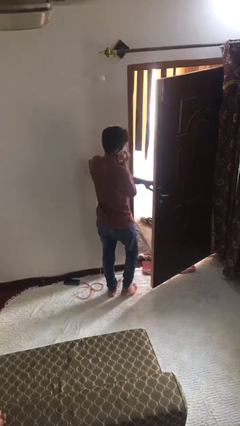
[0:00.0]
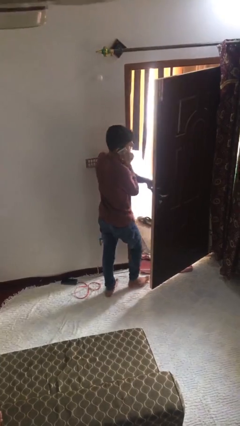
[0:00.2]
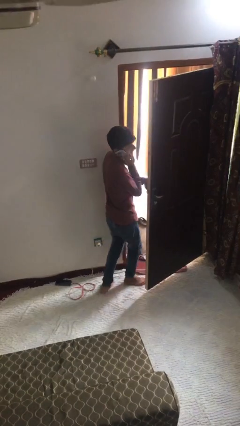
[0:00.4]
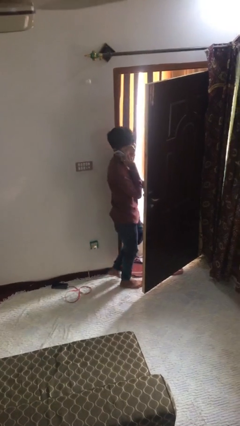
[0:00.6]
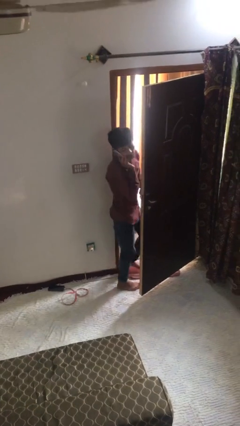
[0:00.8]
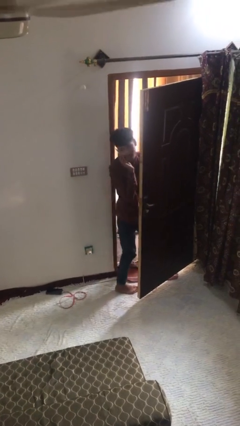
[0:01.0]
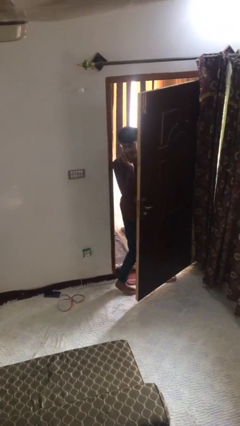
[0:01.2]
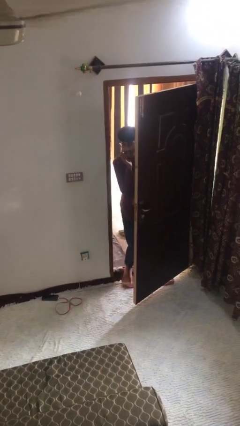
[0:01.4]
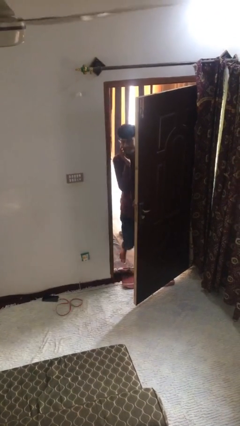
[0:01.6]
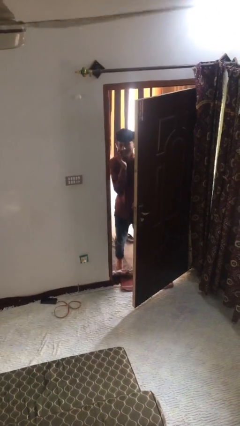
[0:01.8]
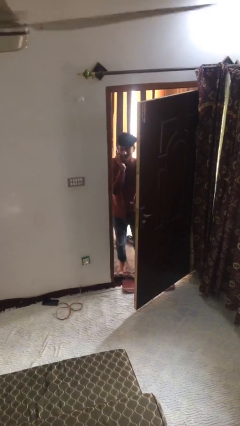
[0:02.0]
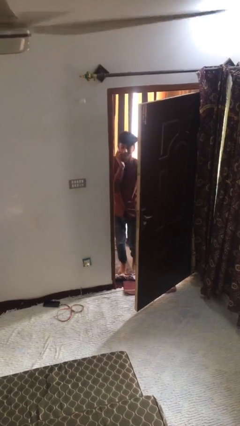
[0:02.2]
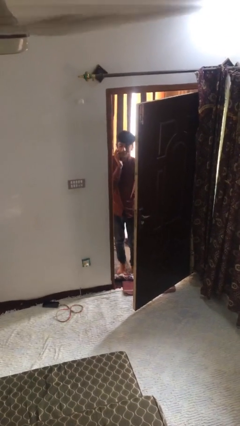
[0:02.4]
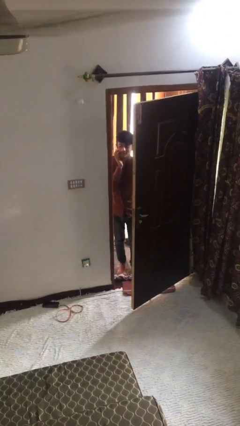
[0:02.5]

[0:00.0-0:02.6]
person exits scene through structure

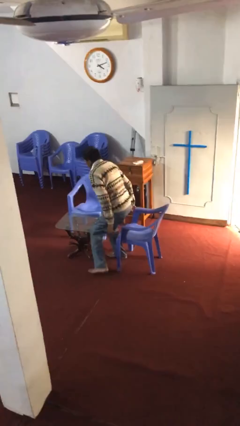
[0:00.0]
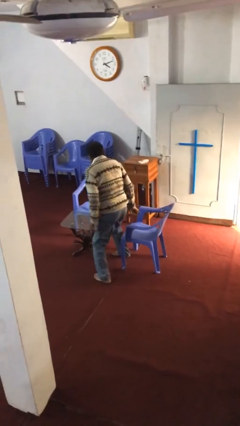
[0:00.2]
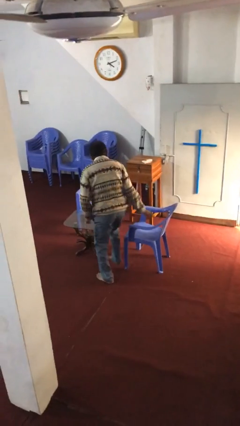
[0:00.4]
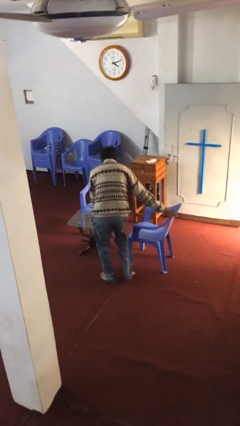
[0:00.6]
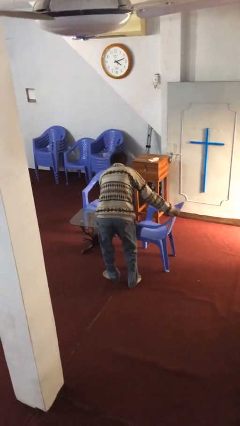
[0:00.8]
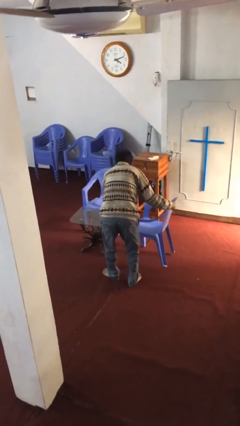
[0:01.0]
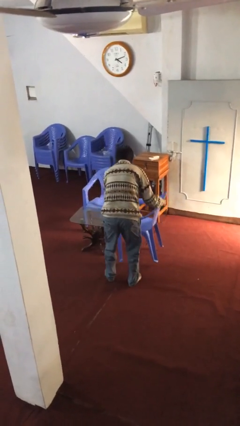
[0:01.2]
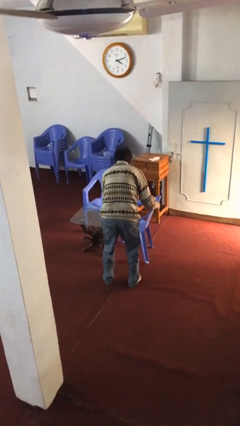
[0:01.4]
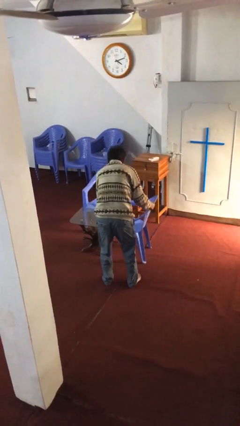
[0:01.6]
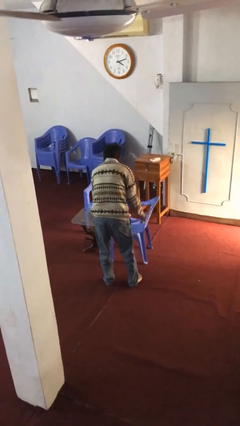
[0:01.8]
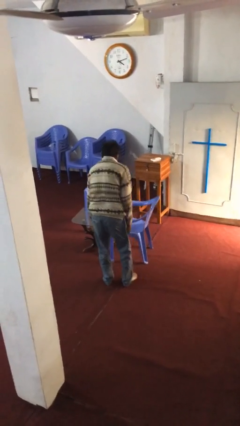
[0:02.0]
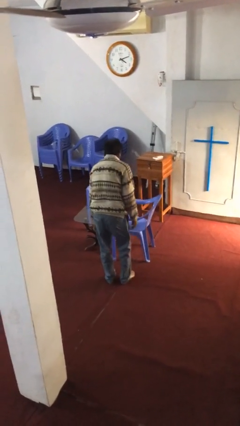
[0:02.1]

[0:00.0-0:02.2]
person stands up

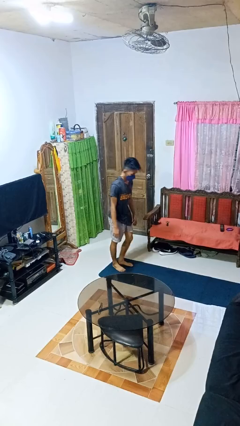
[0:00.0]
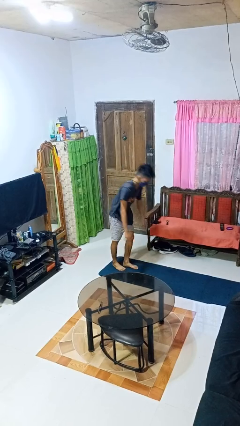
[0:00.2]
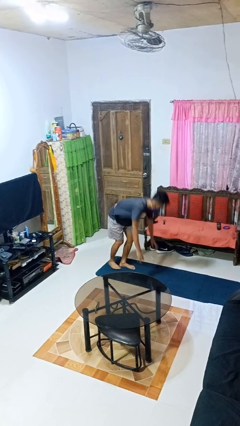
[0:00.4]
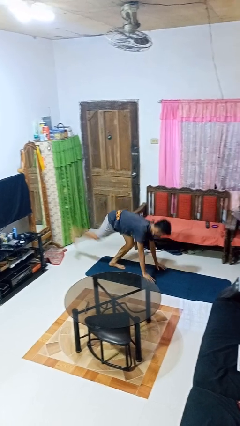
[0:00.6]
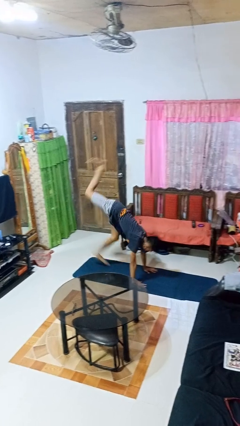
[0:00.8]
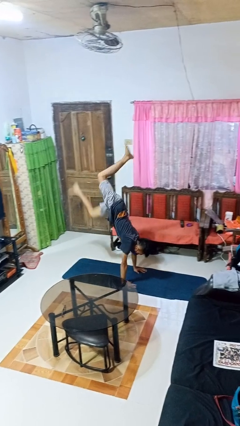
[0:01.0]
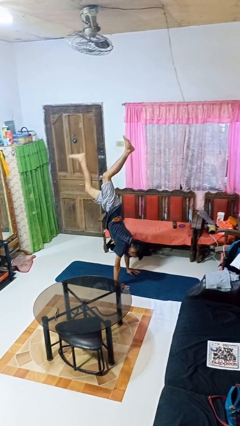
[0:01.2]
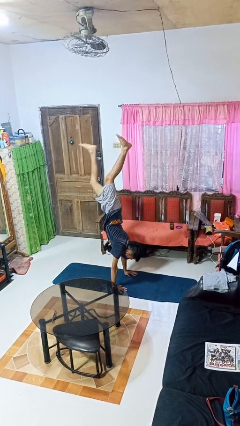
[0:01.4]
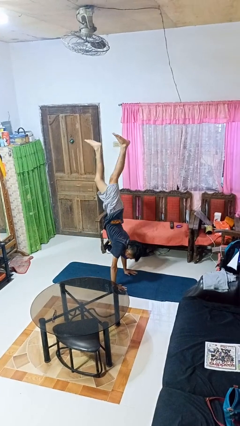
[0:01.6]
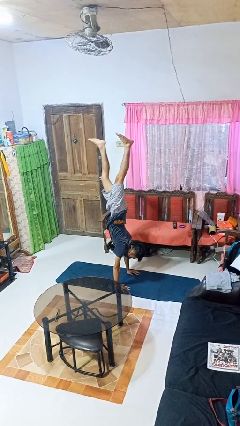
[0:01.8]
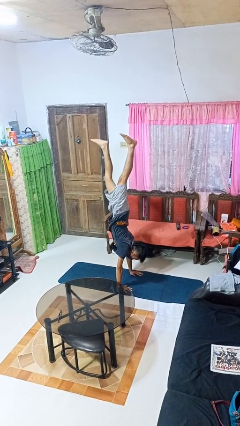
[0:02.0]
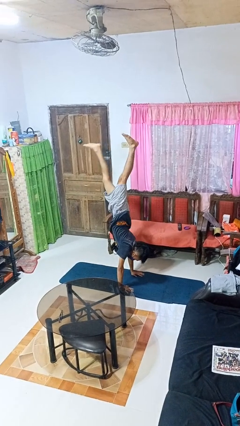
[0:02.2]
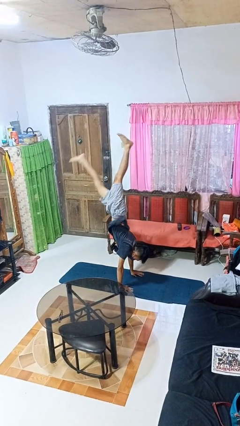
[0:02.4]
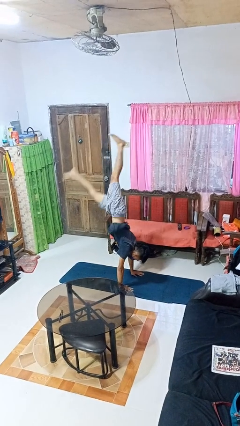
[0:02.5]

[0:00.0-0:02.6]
person handstand

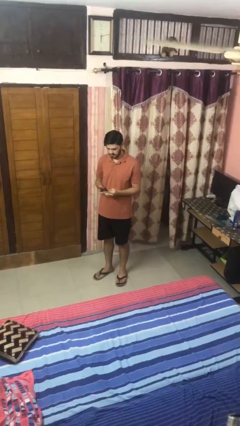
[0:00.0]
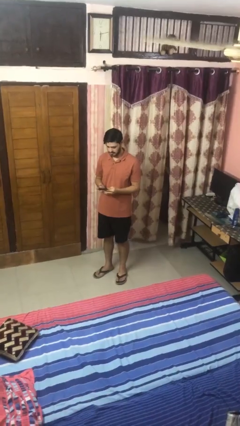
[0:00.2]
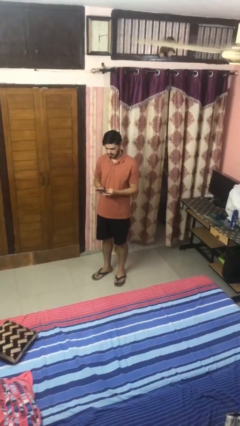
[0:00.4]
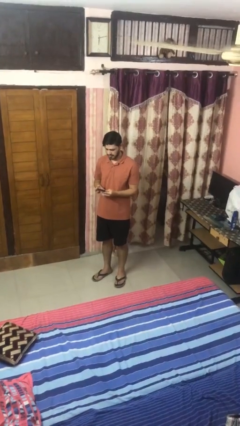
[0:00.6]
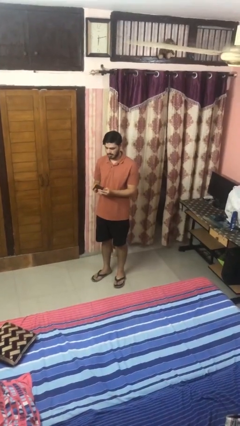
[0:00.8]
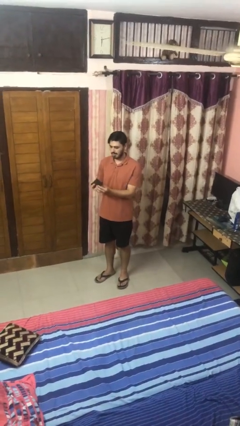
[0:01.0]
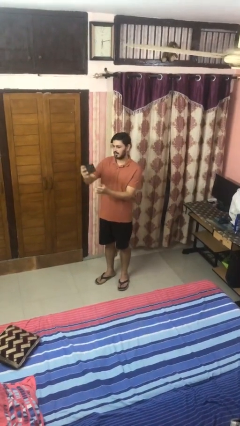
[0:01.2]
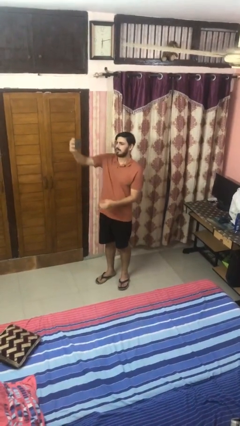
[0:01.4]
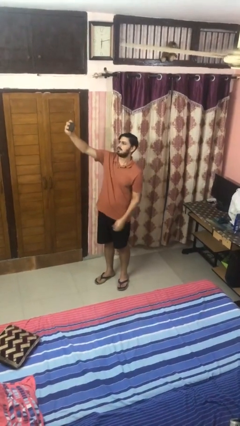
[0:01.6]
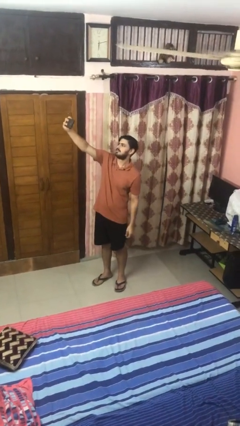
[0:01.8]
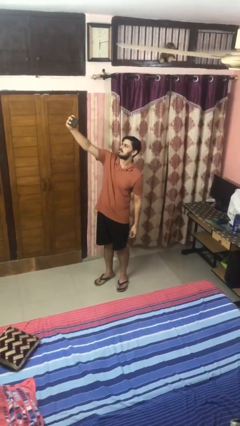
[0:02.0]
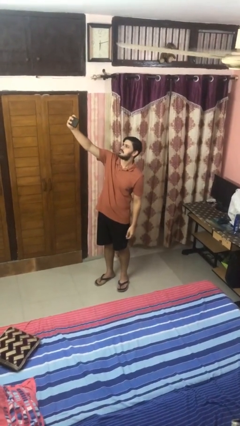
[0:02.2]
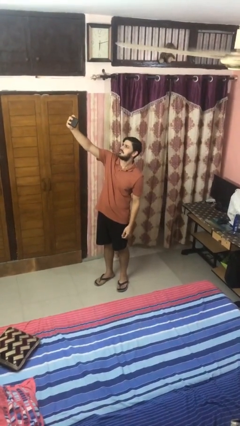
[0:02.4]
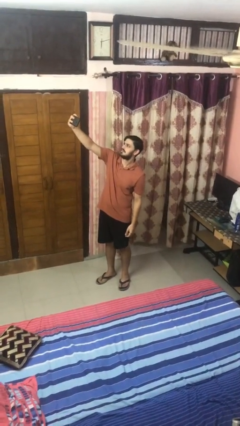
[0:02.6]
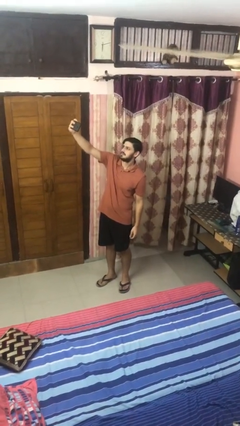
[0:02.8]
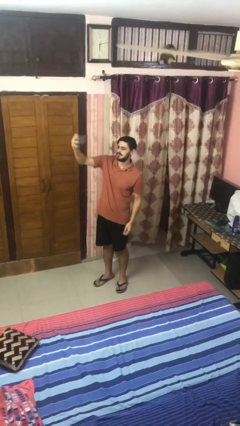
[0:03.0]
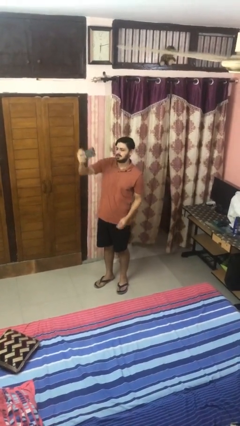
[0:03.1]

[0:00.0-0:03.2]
person takes selfie

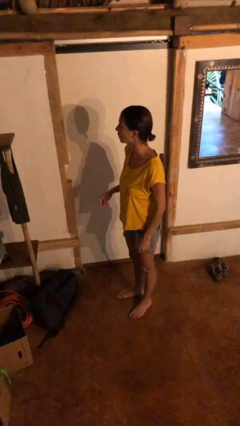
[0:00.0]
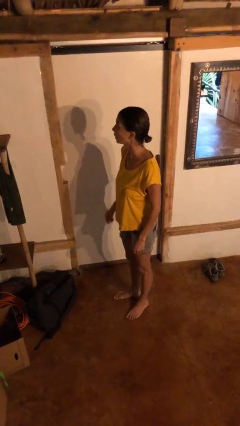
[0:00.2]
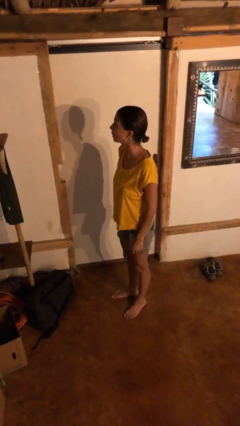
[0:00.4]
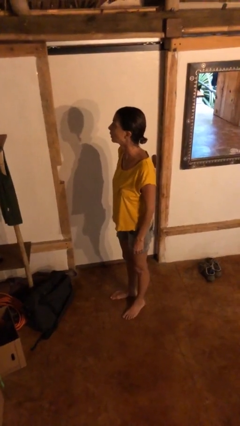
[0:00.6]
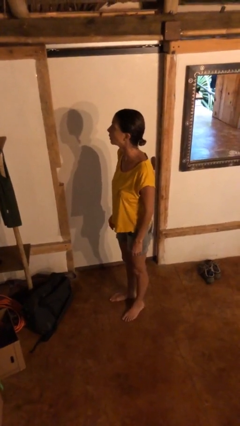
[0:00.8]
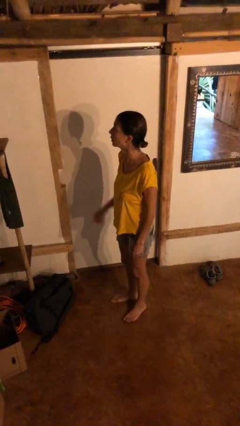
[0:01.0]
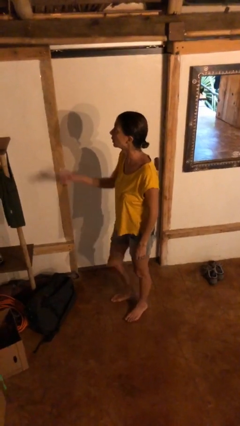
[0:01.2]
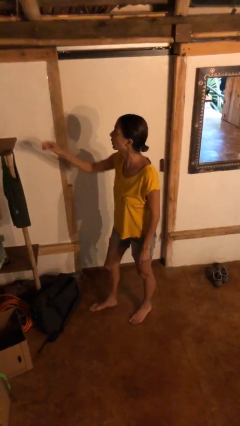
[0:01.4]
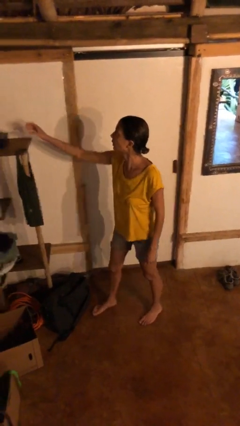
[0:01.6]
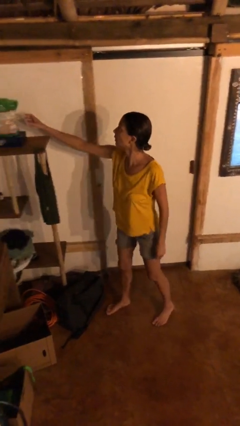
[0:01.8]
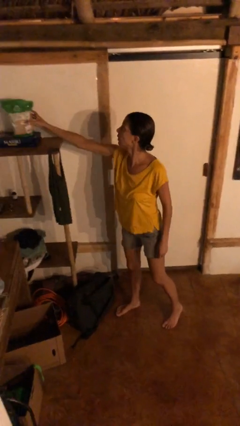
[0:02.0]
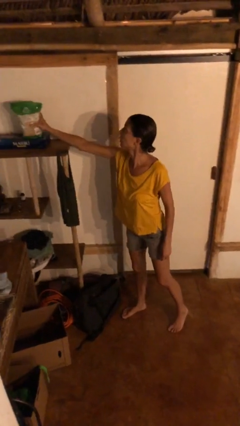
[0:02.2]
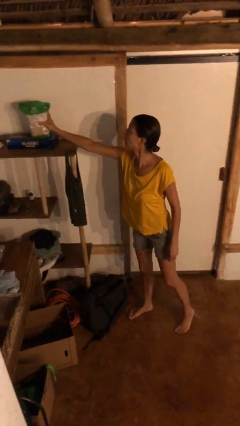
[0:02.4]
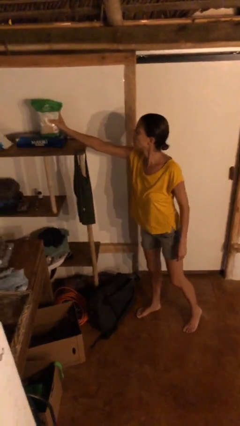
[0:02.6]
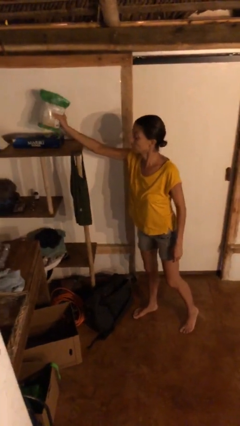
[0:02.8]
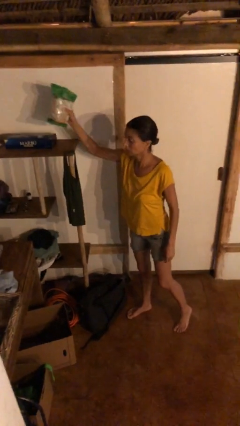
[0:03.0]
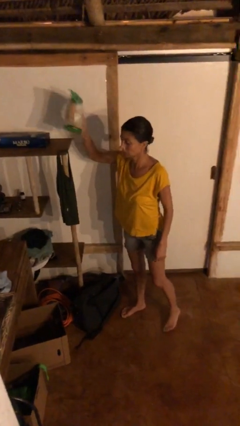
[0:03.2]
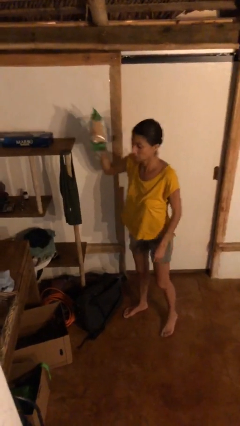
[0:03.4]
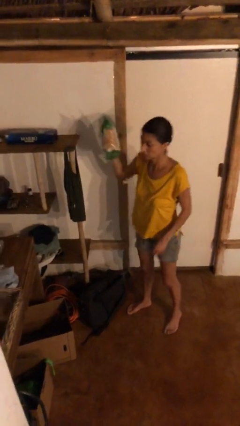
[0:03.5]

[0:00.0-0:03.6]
person picks up object from shelf

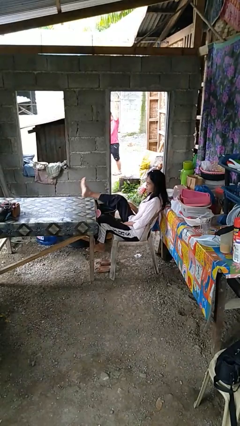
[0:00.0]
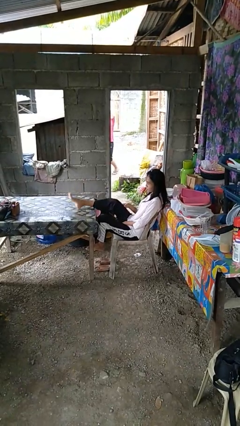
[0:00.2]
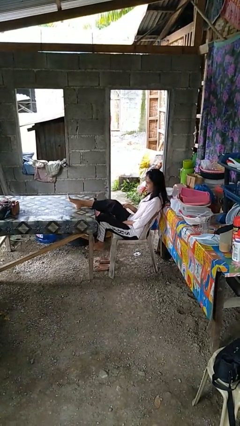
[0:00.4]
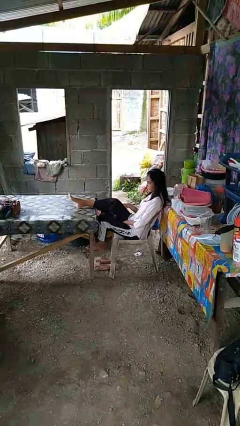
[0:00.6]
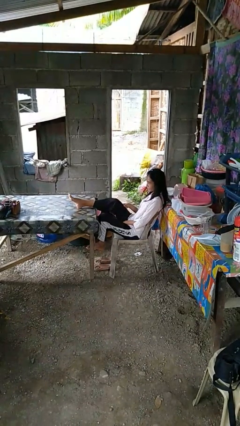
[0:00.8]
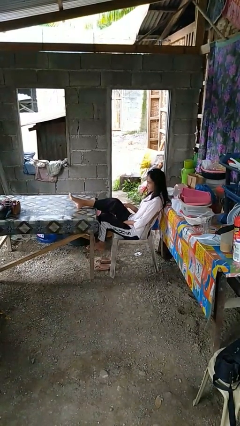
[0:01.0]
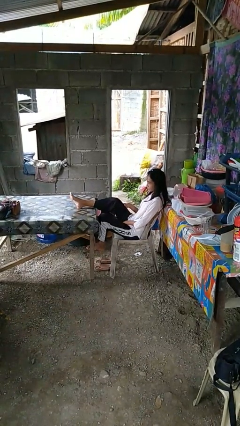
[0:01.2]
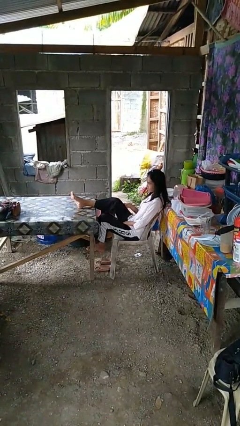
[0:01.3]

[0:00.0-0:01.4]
person puts feet up

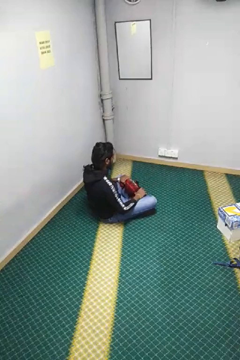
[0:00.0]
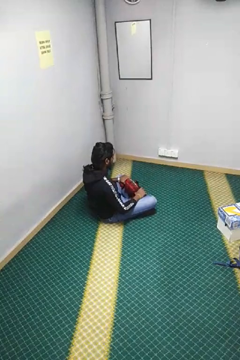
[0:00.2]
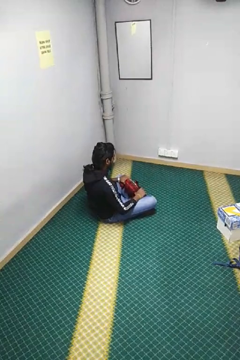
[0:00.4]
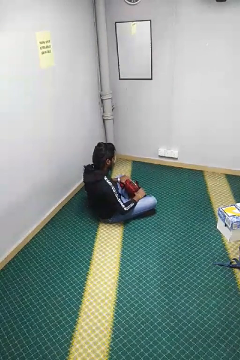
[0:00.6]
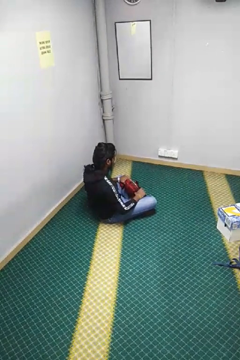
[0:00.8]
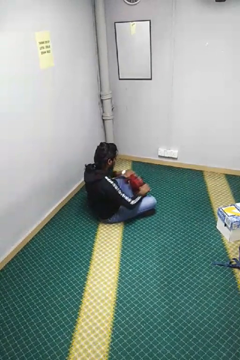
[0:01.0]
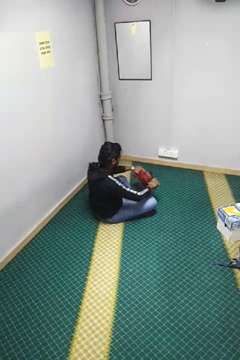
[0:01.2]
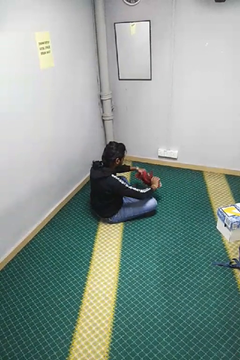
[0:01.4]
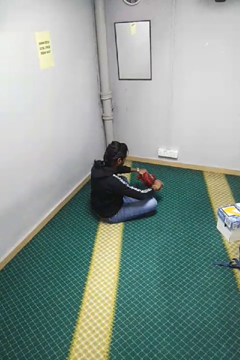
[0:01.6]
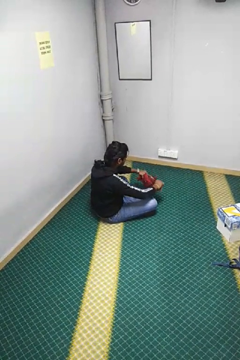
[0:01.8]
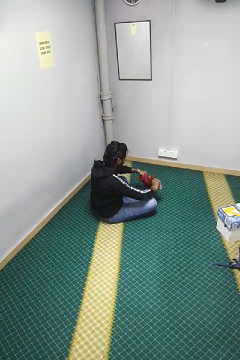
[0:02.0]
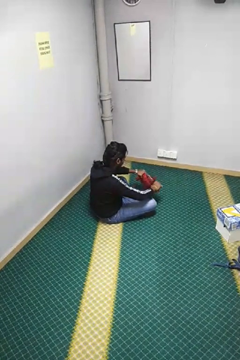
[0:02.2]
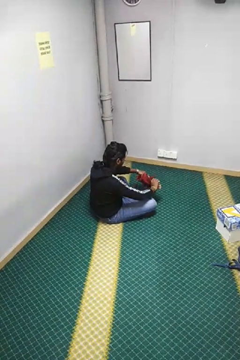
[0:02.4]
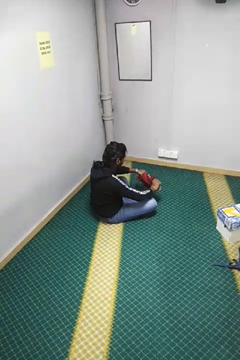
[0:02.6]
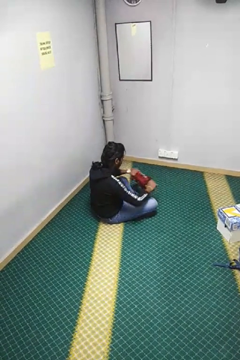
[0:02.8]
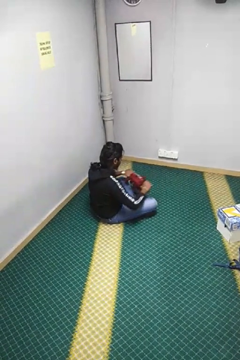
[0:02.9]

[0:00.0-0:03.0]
person squeezes object
